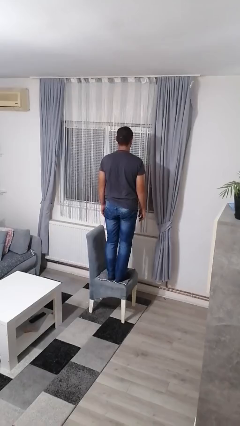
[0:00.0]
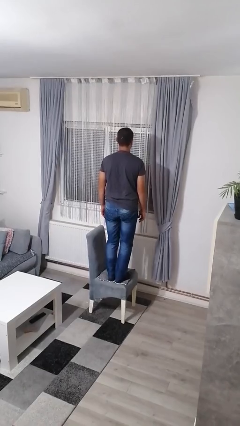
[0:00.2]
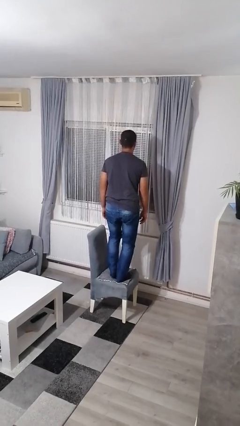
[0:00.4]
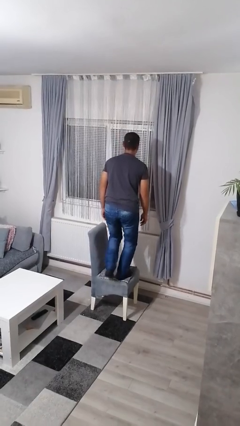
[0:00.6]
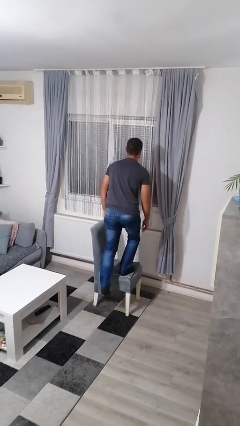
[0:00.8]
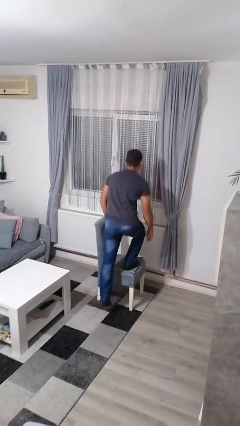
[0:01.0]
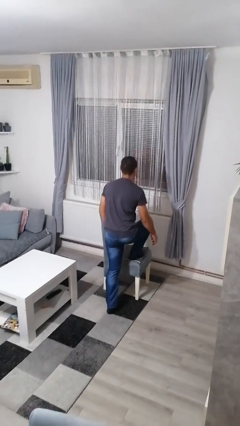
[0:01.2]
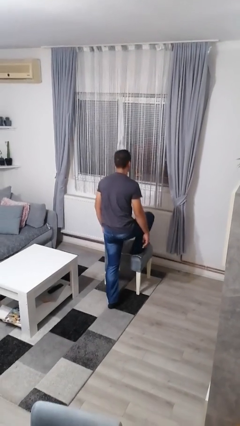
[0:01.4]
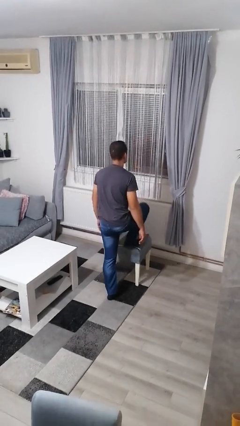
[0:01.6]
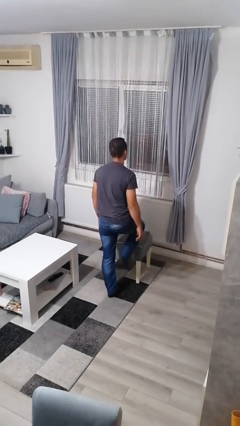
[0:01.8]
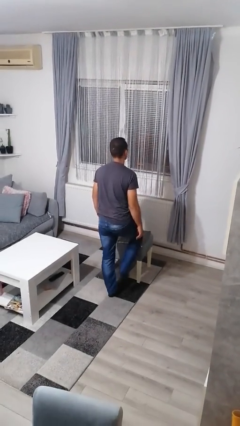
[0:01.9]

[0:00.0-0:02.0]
person climbs off chair

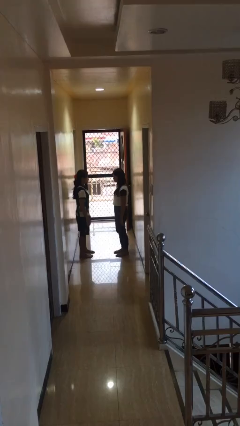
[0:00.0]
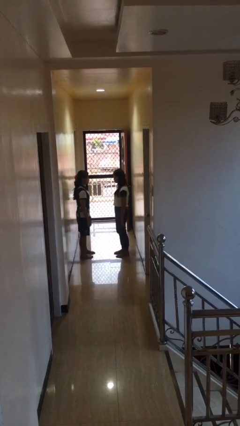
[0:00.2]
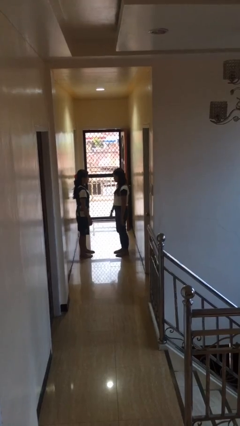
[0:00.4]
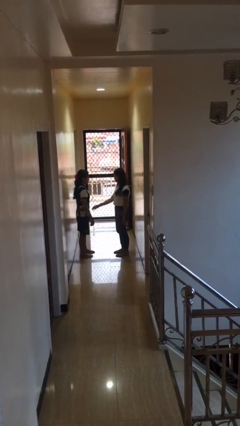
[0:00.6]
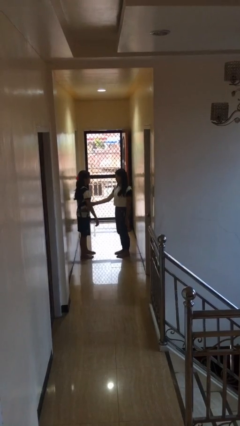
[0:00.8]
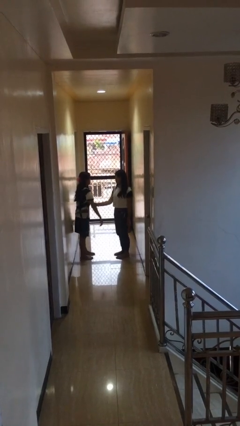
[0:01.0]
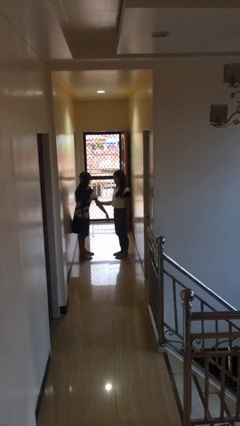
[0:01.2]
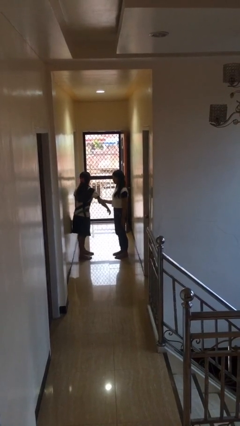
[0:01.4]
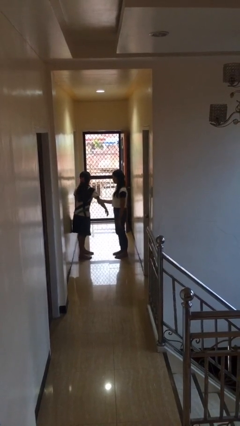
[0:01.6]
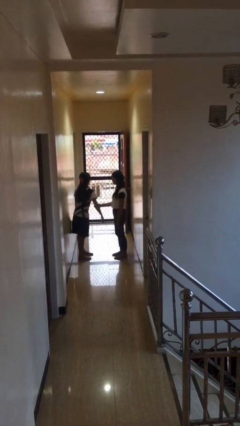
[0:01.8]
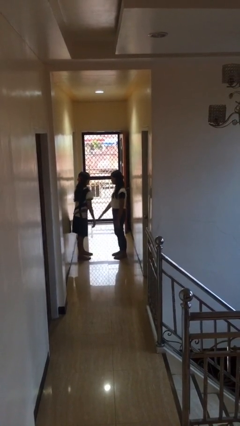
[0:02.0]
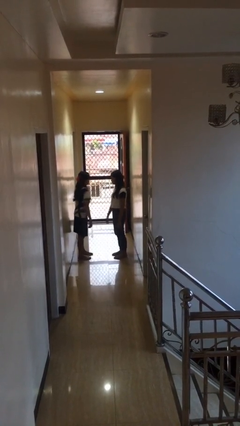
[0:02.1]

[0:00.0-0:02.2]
person grabs person by bicep

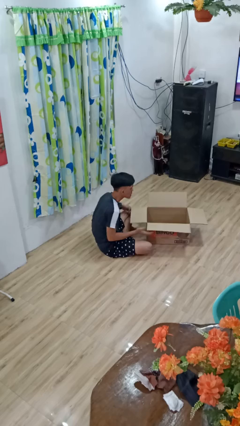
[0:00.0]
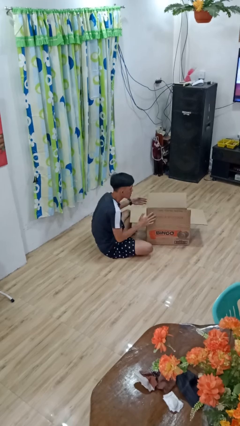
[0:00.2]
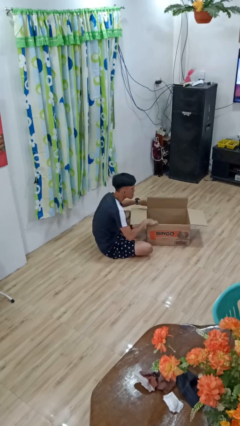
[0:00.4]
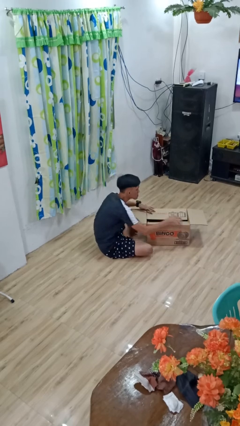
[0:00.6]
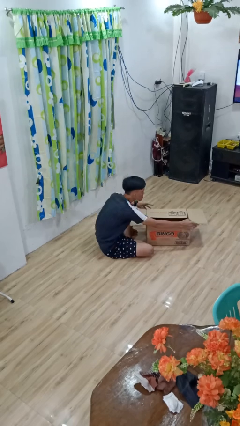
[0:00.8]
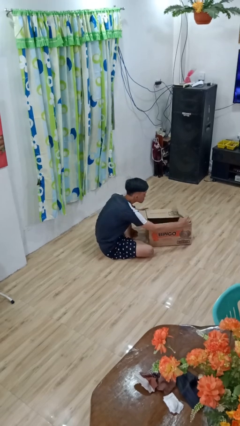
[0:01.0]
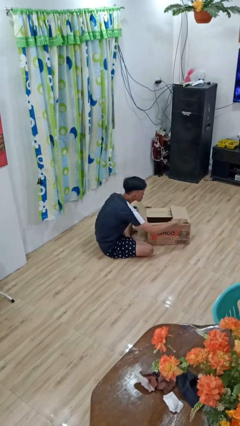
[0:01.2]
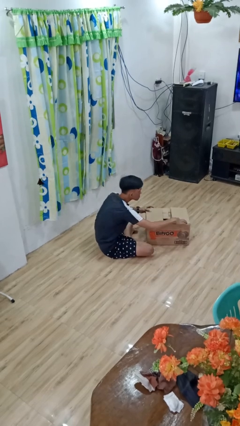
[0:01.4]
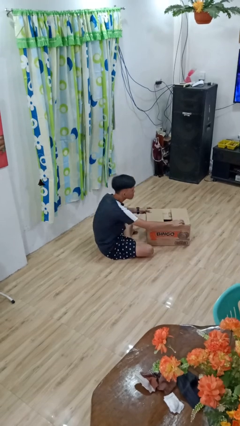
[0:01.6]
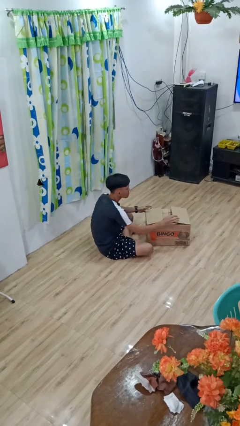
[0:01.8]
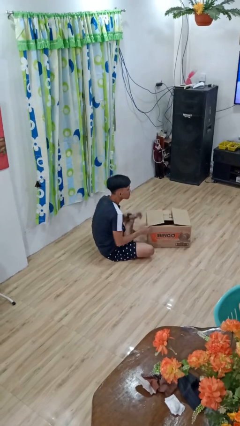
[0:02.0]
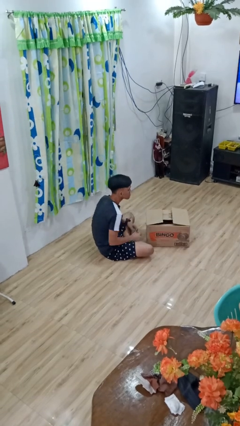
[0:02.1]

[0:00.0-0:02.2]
person closes box

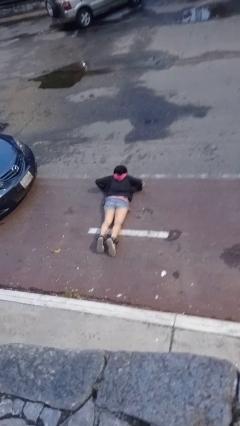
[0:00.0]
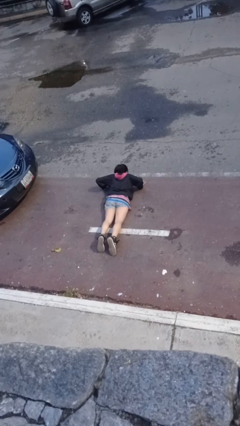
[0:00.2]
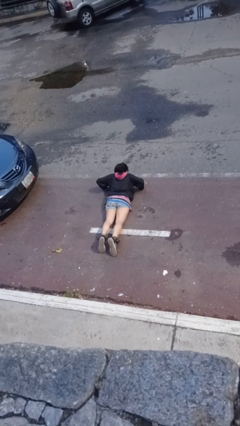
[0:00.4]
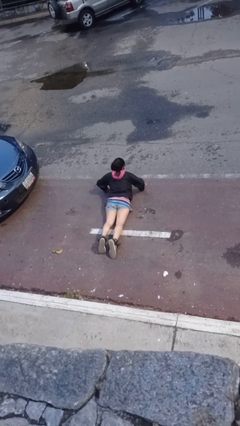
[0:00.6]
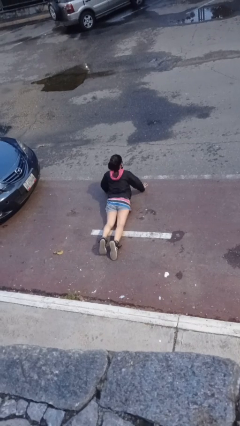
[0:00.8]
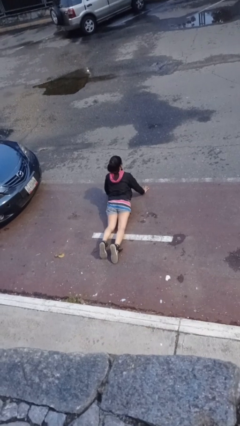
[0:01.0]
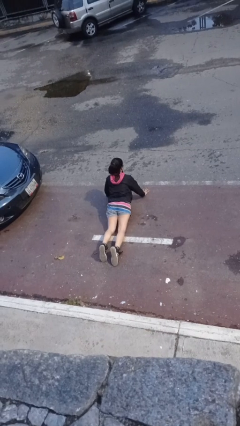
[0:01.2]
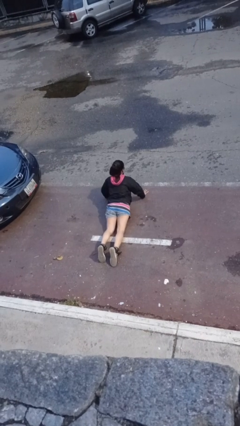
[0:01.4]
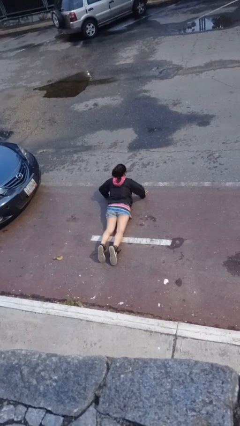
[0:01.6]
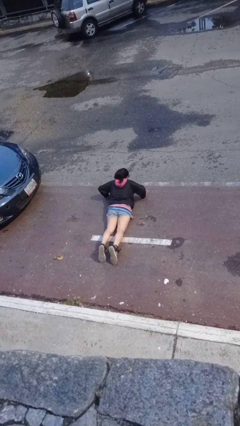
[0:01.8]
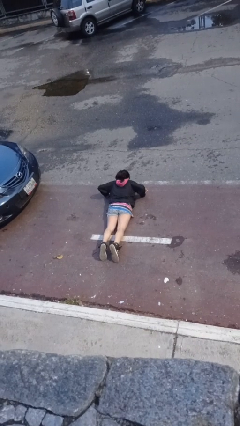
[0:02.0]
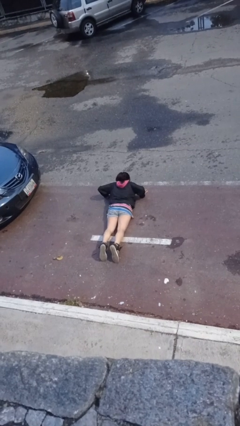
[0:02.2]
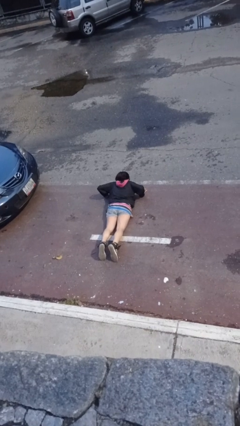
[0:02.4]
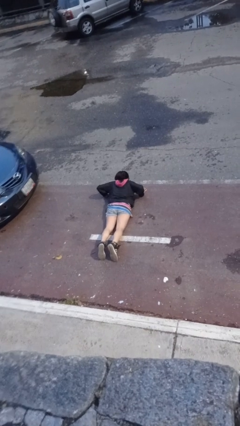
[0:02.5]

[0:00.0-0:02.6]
person exercises with pushup

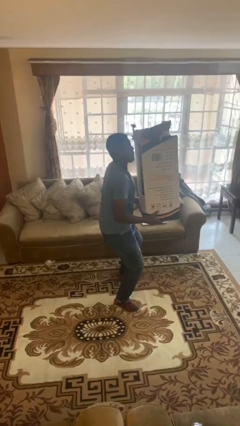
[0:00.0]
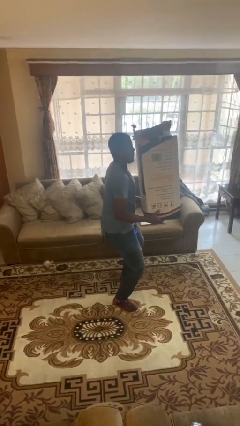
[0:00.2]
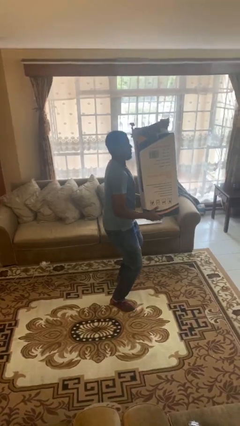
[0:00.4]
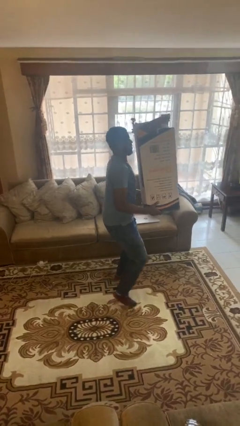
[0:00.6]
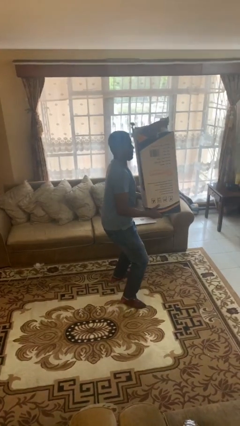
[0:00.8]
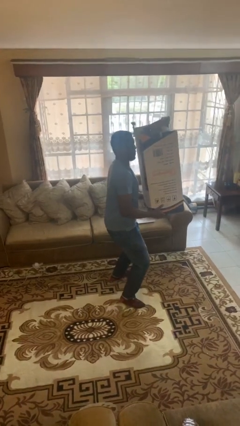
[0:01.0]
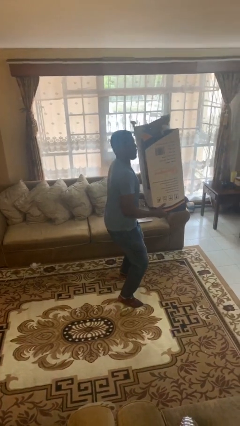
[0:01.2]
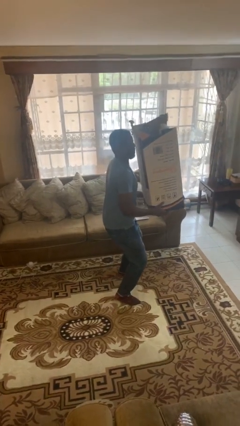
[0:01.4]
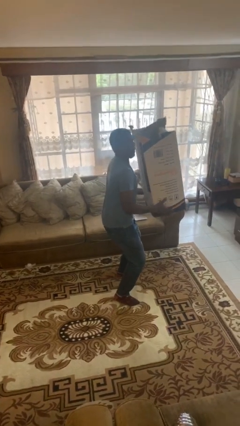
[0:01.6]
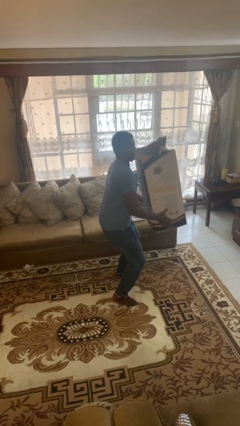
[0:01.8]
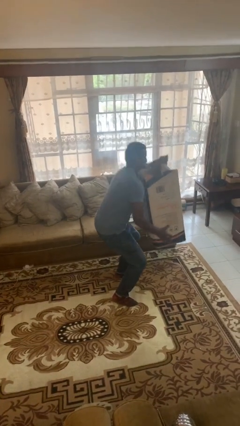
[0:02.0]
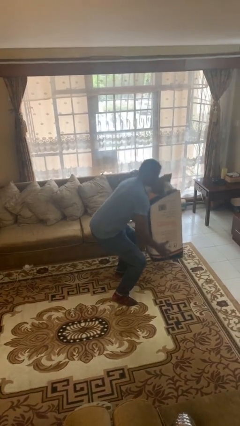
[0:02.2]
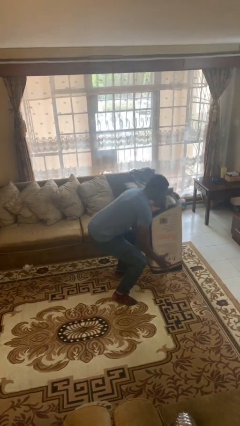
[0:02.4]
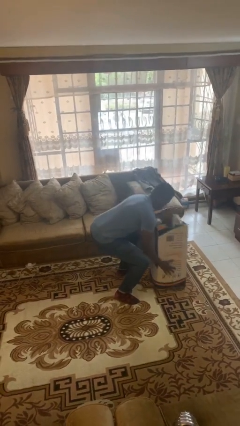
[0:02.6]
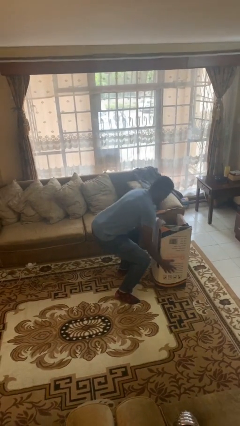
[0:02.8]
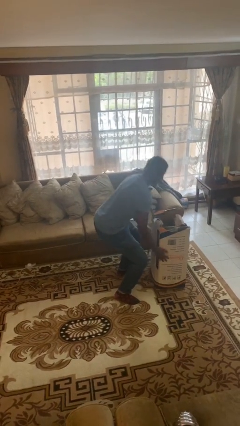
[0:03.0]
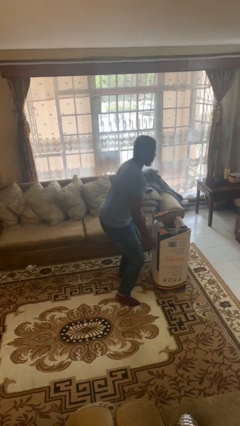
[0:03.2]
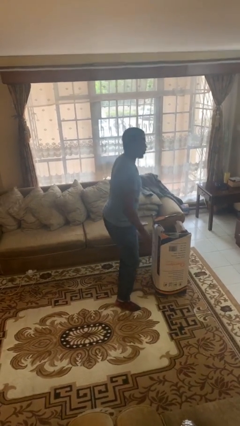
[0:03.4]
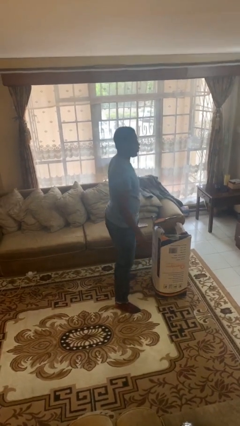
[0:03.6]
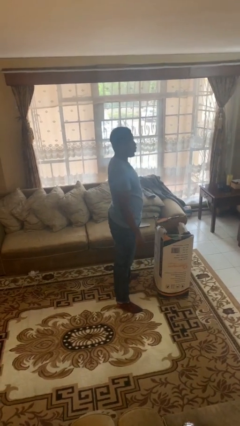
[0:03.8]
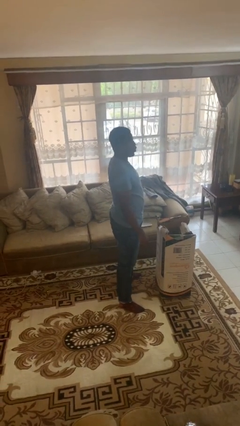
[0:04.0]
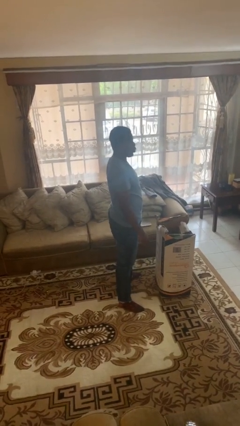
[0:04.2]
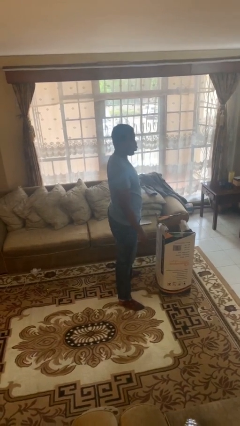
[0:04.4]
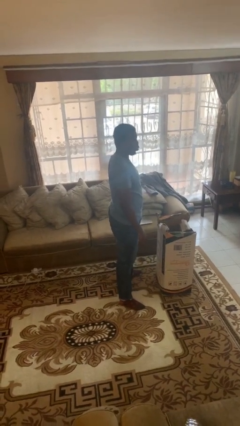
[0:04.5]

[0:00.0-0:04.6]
person puts down object on floor

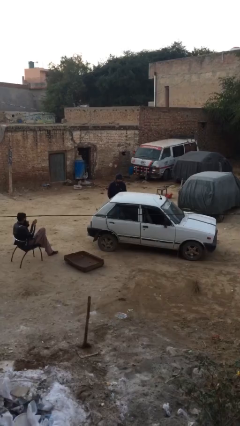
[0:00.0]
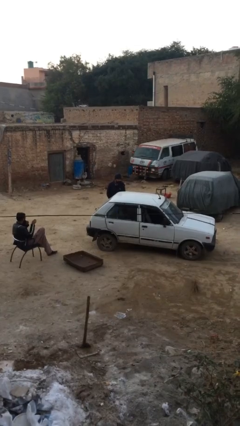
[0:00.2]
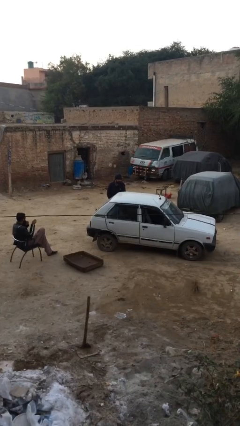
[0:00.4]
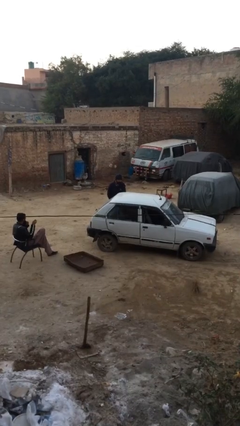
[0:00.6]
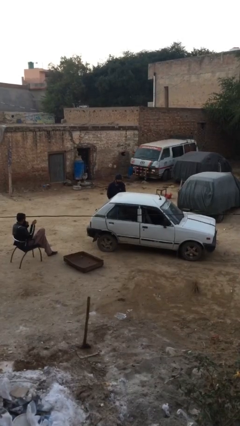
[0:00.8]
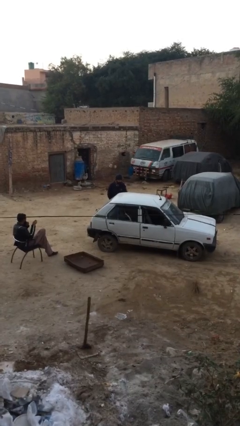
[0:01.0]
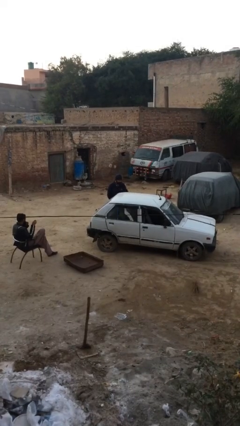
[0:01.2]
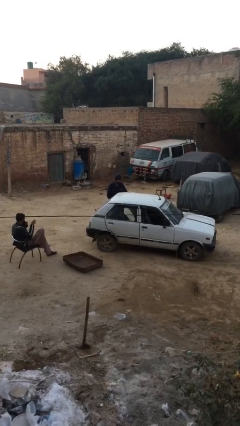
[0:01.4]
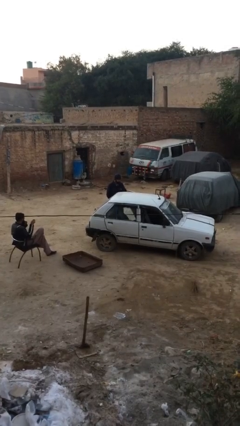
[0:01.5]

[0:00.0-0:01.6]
person opens car door

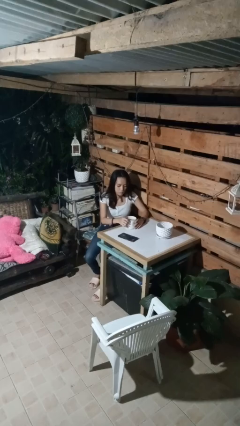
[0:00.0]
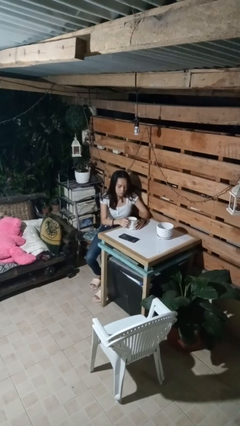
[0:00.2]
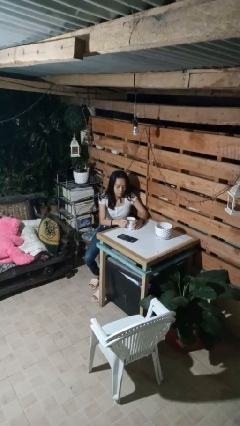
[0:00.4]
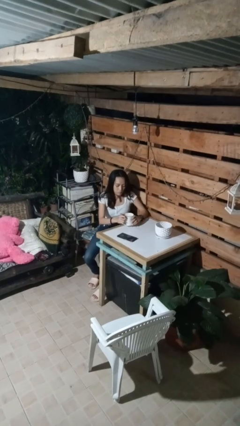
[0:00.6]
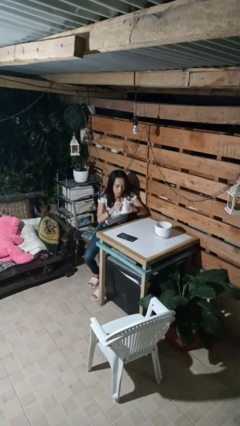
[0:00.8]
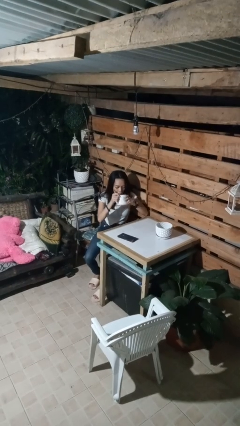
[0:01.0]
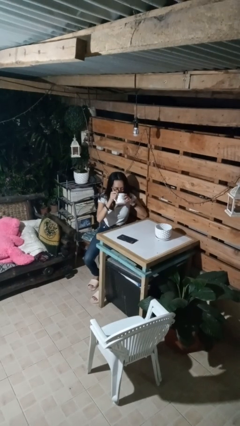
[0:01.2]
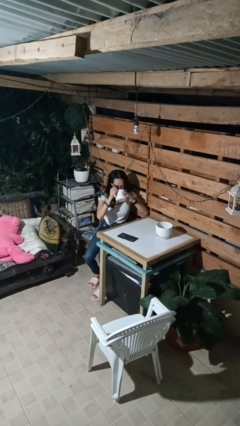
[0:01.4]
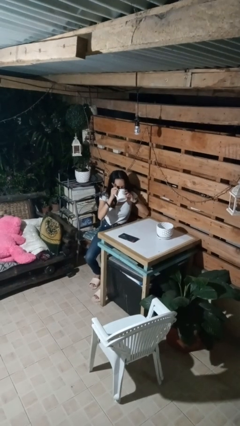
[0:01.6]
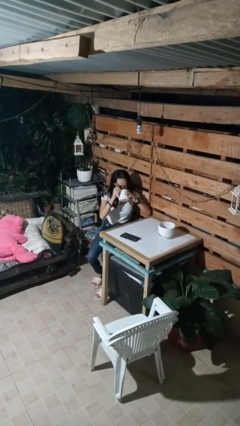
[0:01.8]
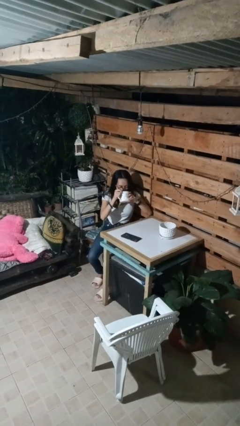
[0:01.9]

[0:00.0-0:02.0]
person drinks from mug
